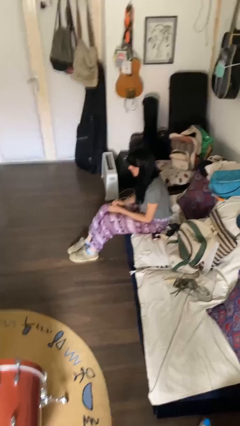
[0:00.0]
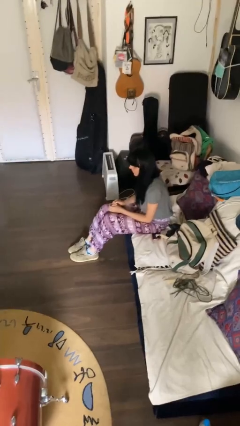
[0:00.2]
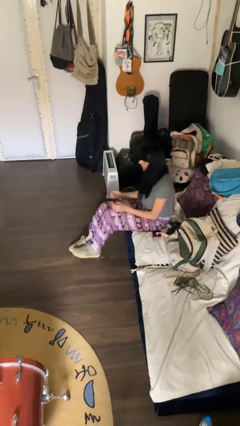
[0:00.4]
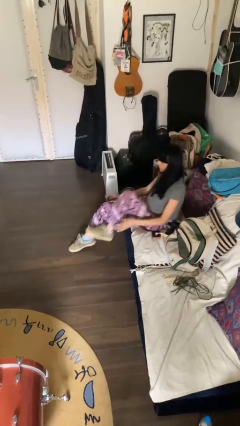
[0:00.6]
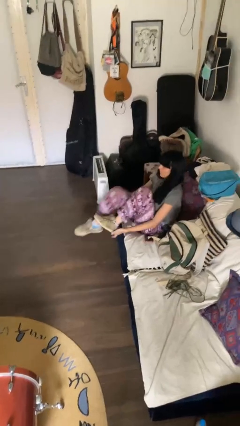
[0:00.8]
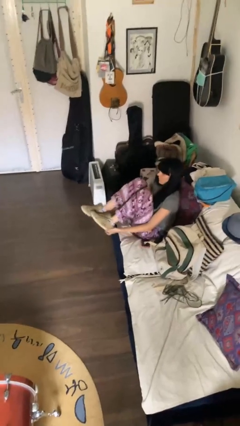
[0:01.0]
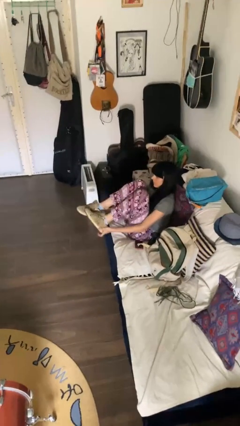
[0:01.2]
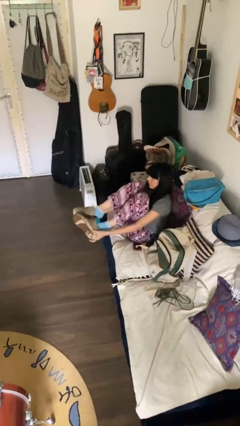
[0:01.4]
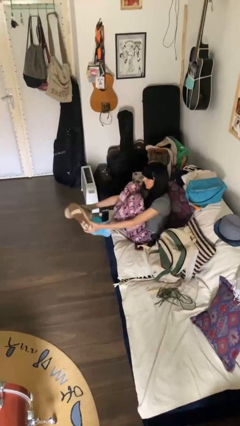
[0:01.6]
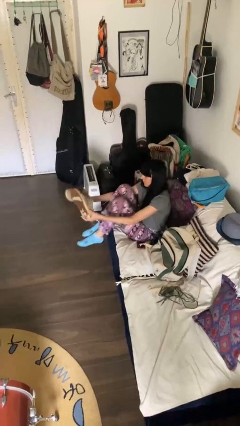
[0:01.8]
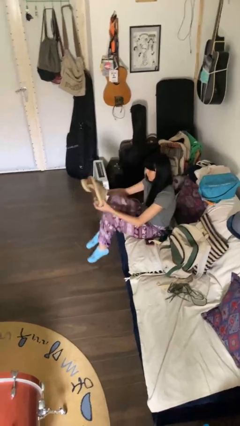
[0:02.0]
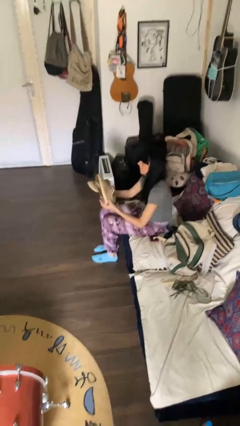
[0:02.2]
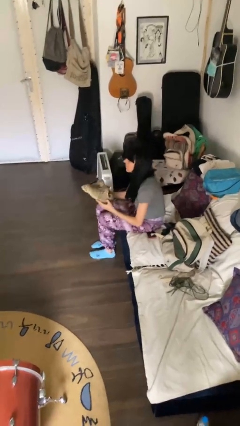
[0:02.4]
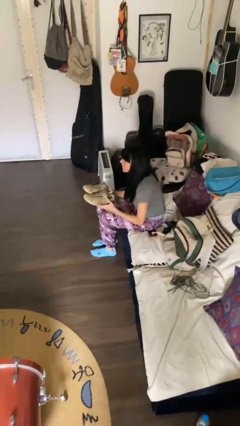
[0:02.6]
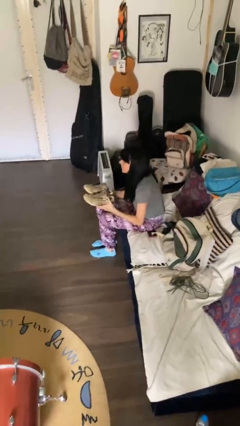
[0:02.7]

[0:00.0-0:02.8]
person takes off shoes

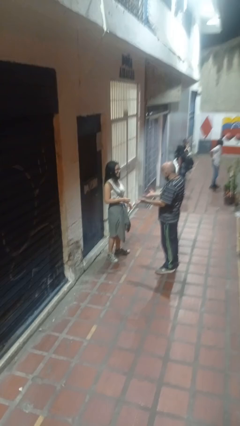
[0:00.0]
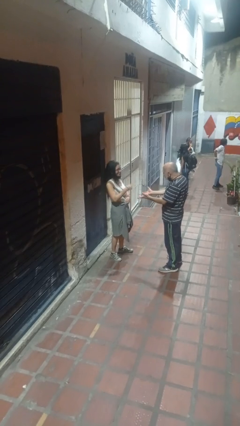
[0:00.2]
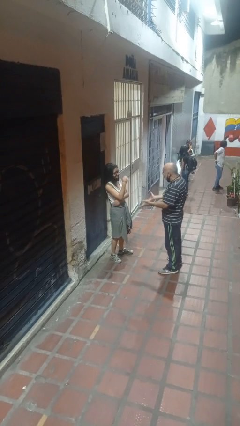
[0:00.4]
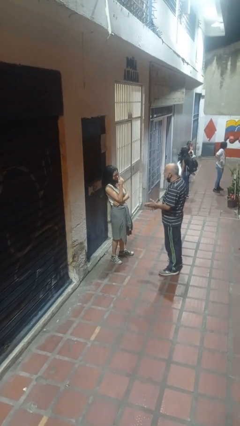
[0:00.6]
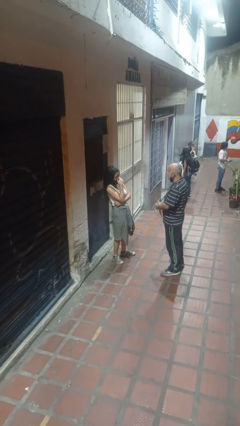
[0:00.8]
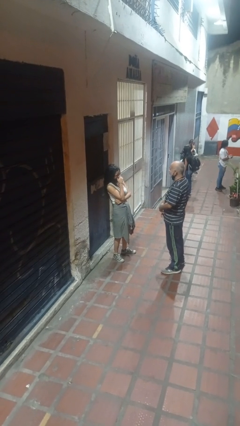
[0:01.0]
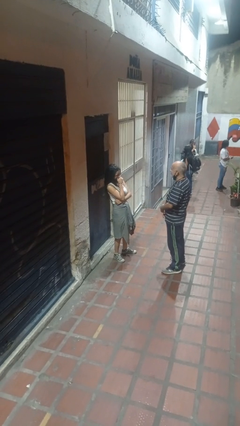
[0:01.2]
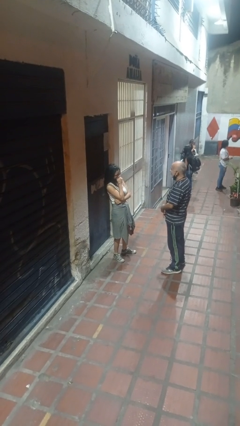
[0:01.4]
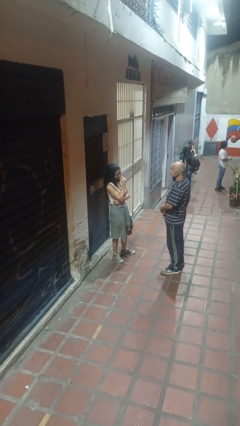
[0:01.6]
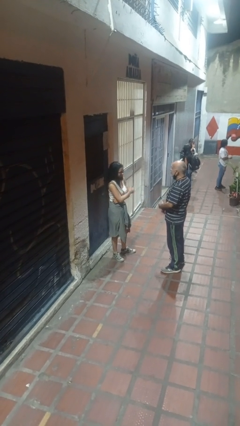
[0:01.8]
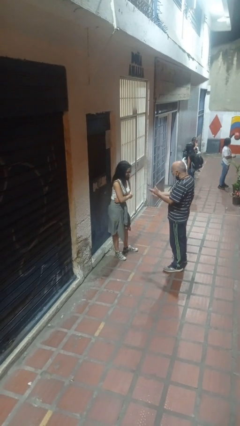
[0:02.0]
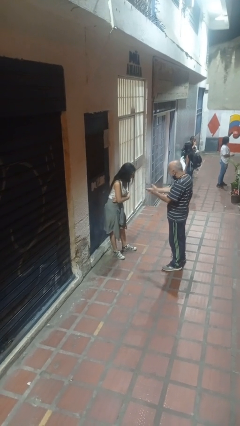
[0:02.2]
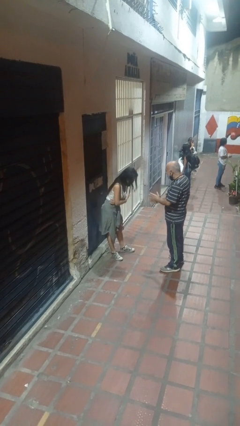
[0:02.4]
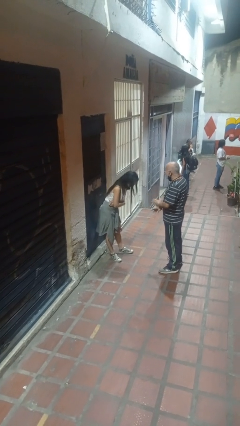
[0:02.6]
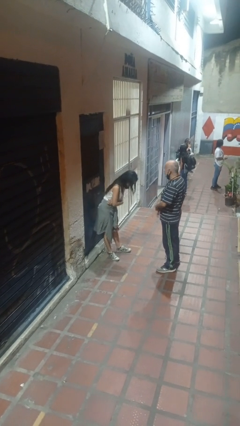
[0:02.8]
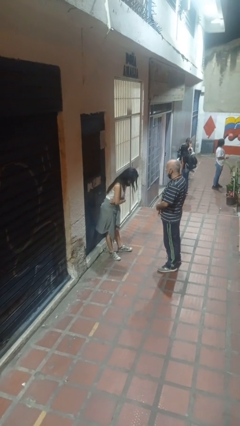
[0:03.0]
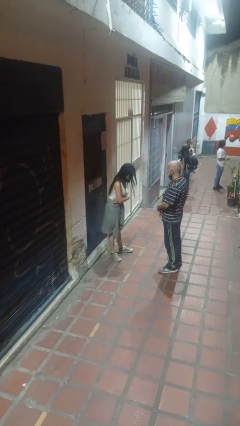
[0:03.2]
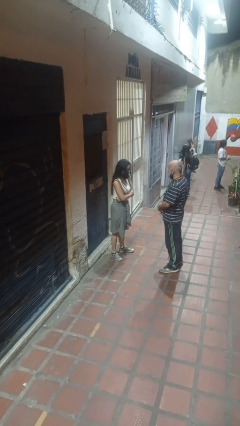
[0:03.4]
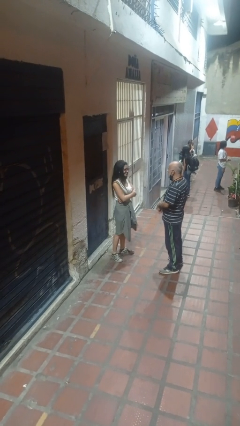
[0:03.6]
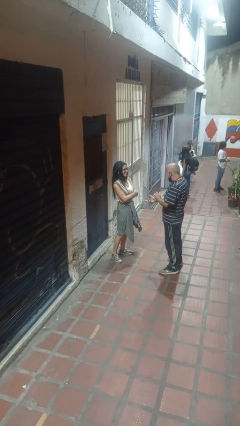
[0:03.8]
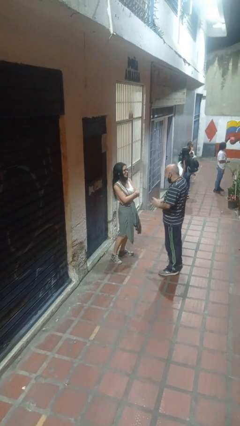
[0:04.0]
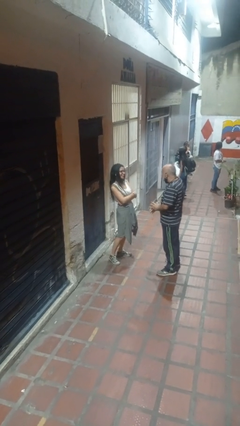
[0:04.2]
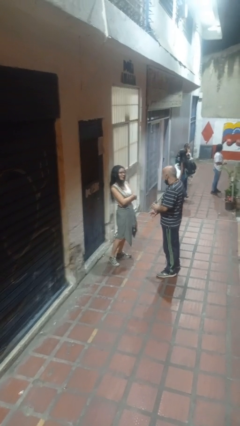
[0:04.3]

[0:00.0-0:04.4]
person laughs with person

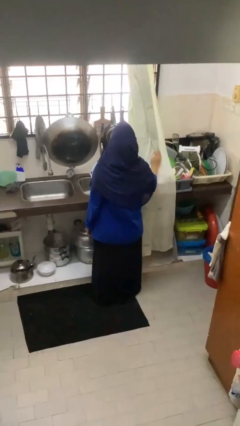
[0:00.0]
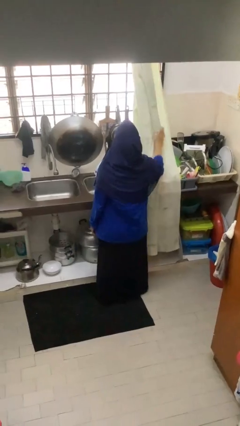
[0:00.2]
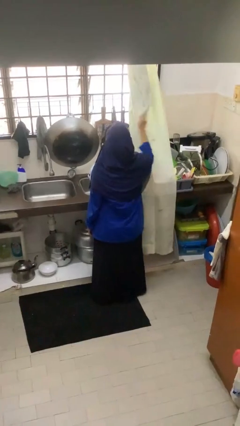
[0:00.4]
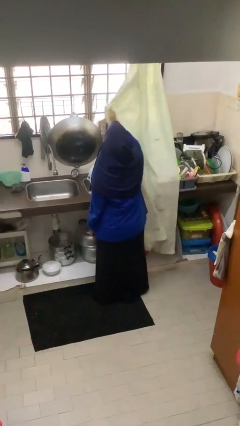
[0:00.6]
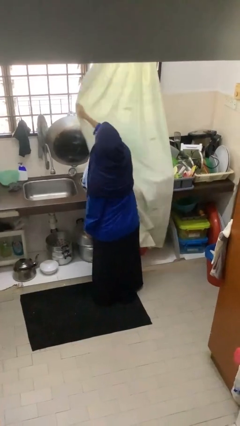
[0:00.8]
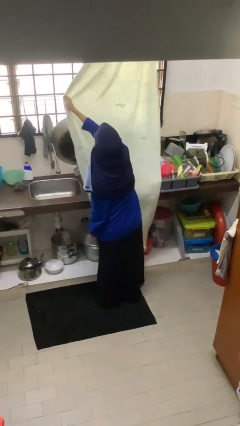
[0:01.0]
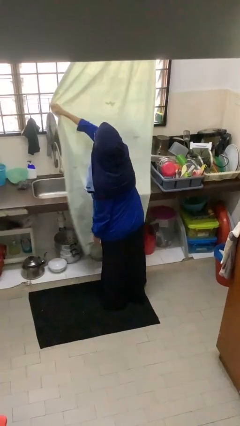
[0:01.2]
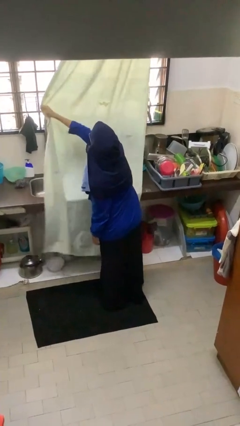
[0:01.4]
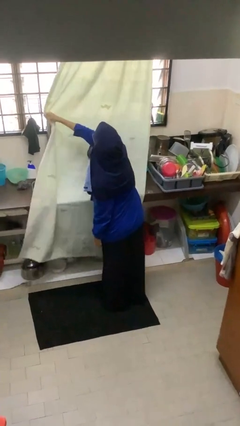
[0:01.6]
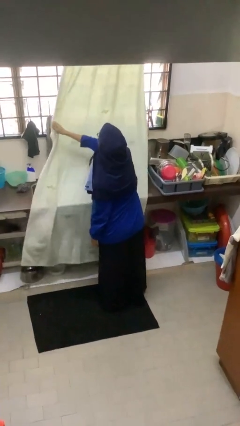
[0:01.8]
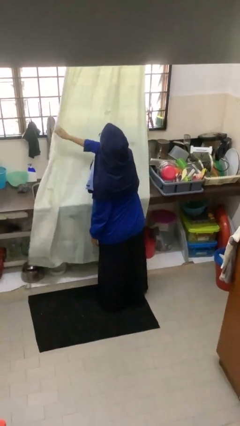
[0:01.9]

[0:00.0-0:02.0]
person closes curtains

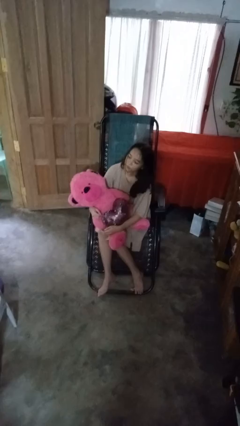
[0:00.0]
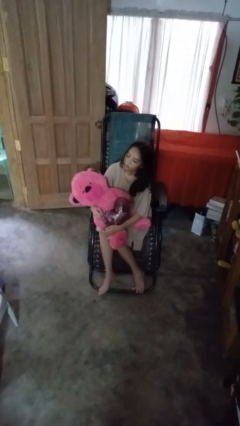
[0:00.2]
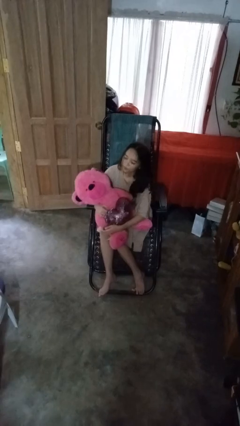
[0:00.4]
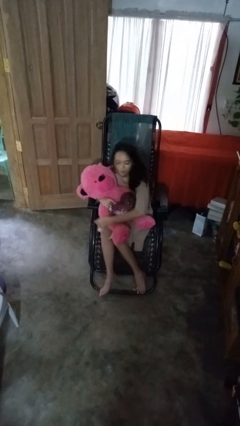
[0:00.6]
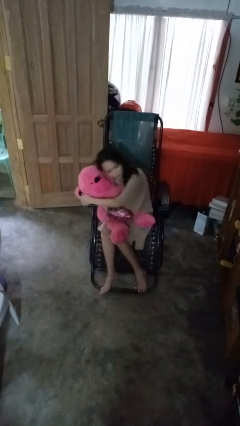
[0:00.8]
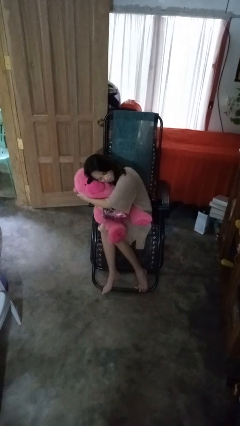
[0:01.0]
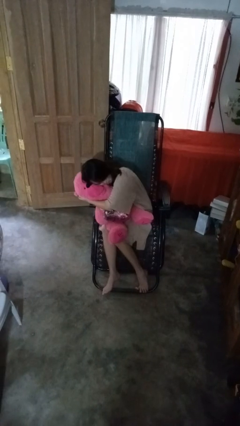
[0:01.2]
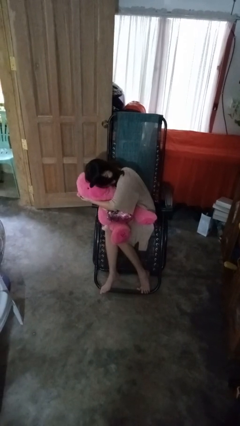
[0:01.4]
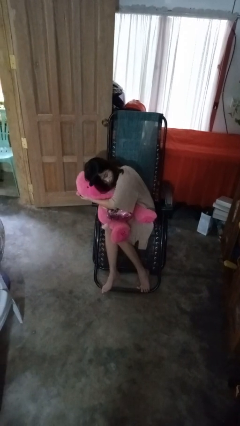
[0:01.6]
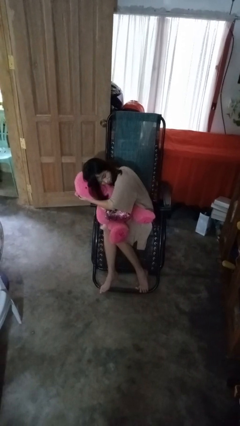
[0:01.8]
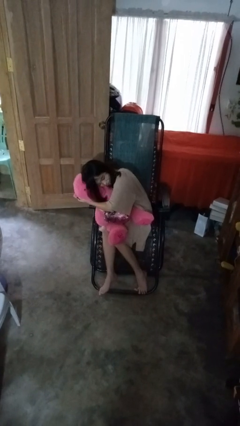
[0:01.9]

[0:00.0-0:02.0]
person hugs stuffed animal

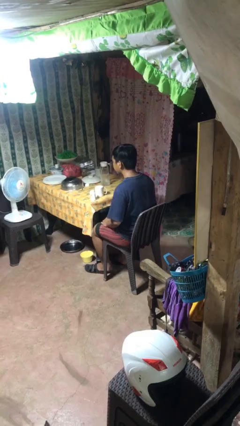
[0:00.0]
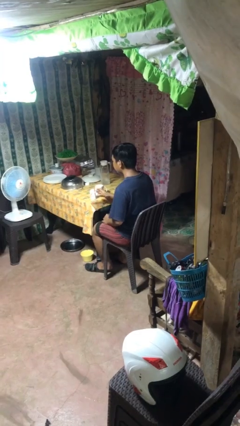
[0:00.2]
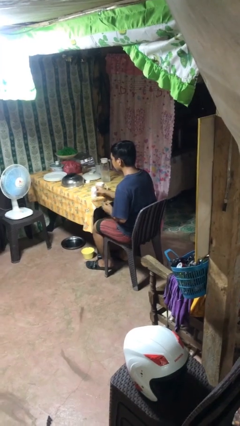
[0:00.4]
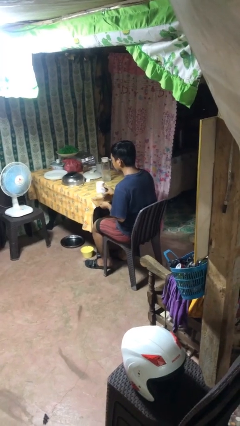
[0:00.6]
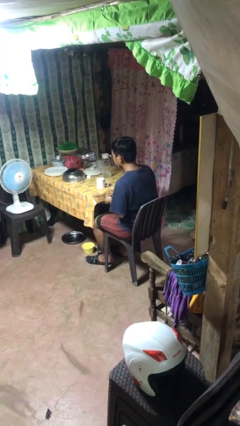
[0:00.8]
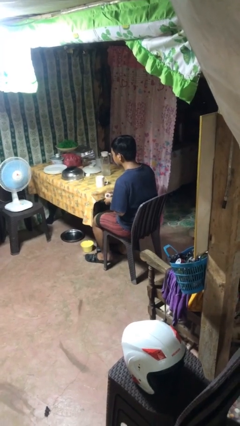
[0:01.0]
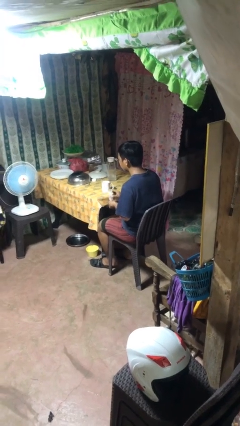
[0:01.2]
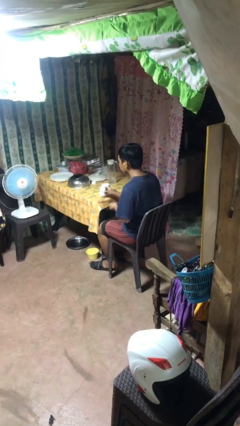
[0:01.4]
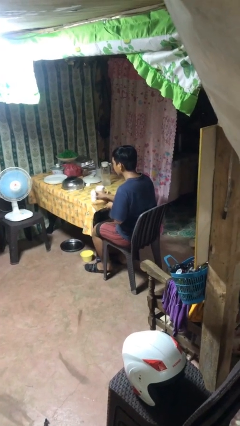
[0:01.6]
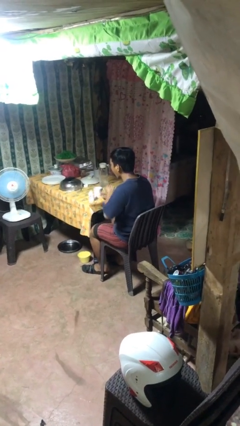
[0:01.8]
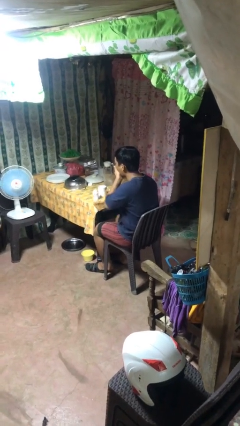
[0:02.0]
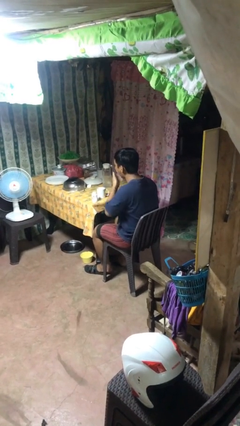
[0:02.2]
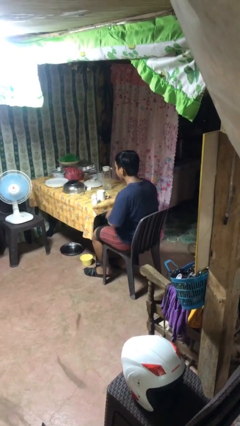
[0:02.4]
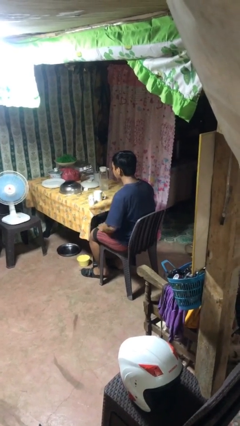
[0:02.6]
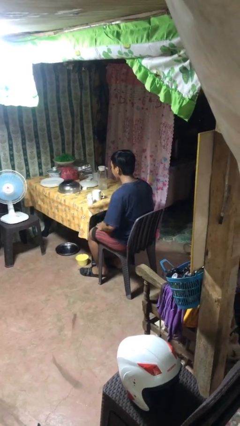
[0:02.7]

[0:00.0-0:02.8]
person takes medicine pills

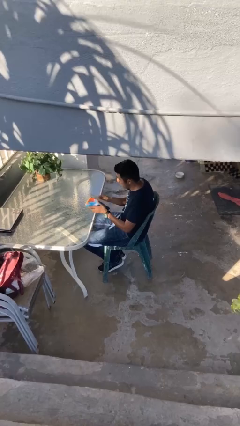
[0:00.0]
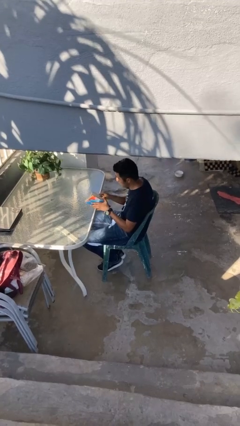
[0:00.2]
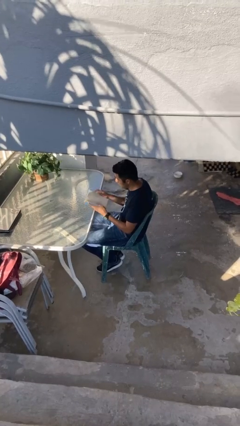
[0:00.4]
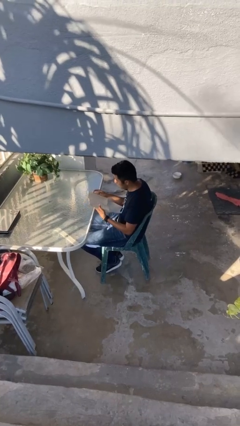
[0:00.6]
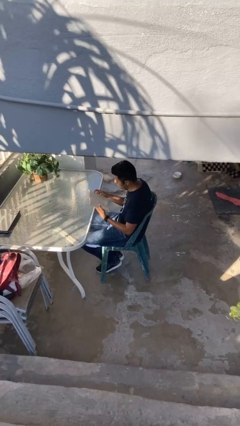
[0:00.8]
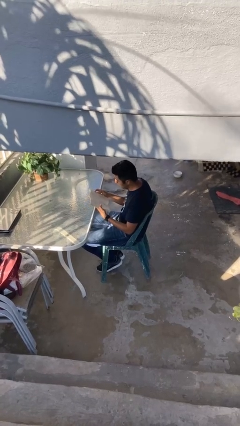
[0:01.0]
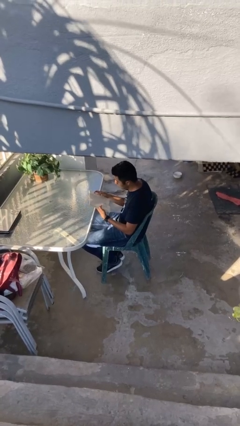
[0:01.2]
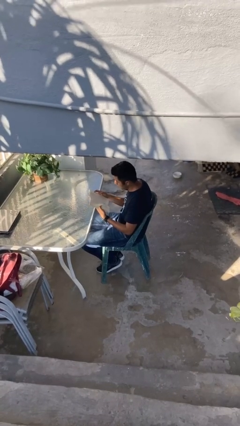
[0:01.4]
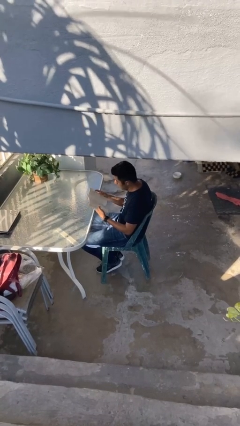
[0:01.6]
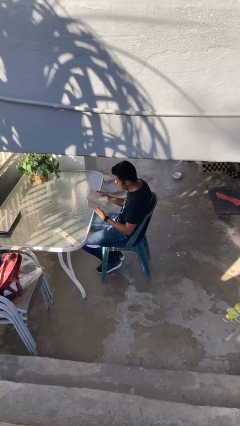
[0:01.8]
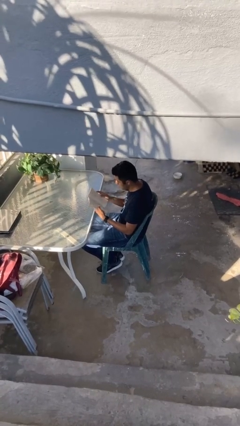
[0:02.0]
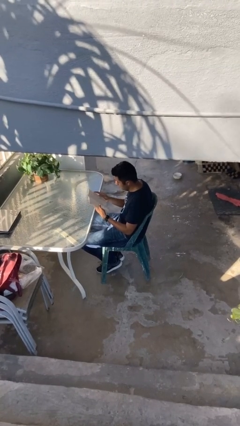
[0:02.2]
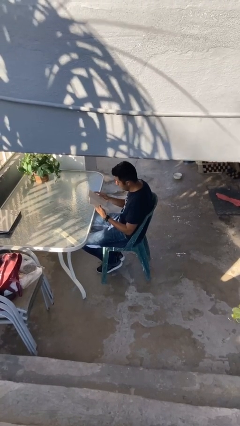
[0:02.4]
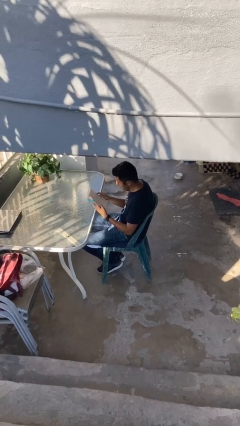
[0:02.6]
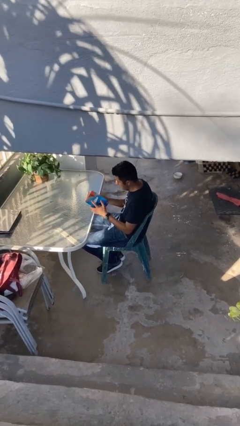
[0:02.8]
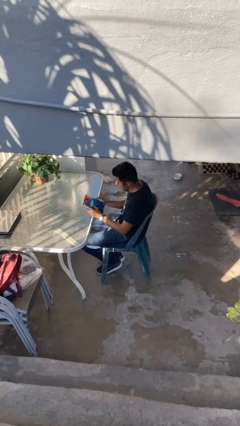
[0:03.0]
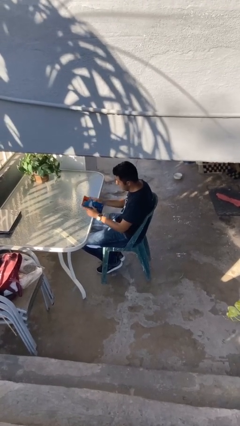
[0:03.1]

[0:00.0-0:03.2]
person reads document

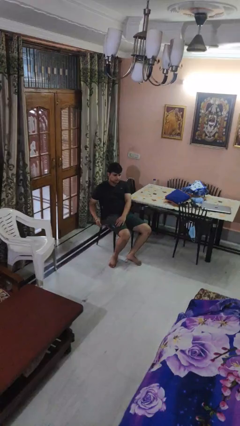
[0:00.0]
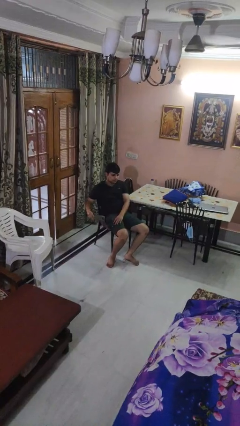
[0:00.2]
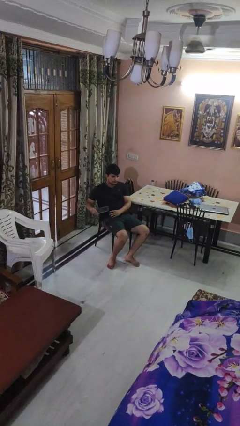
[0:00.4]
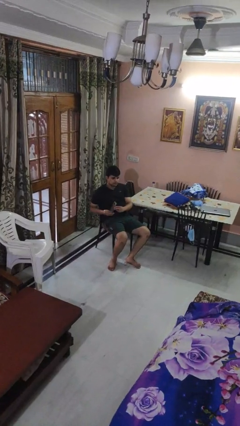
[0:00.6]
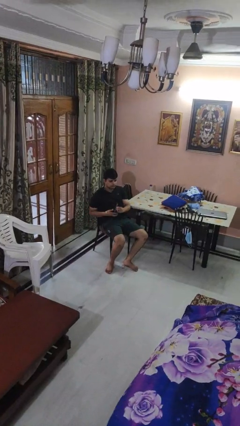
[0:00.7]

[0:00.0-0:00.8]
person takes phone from pocket
